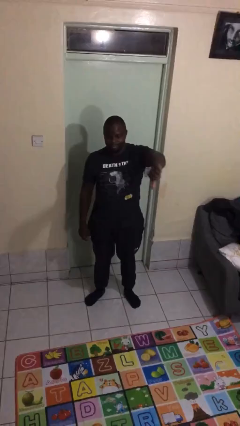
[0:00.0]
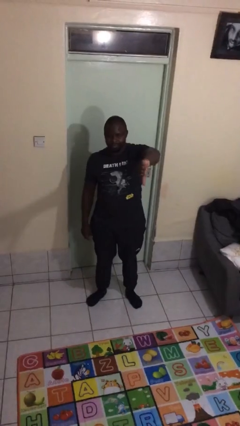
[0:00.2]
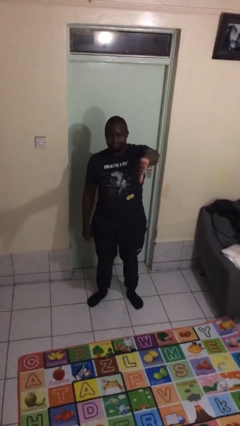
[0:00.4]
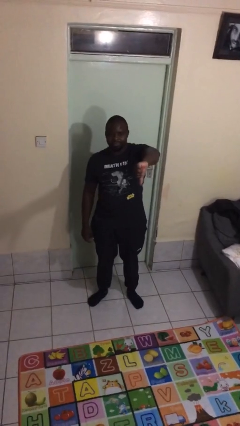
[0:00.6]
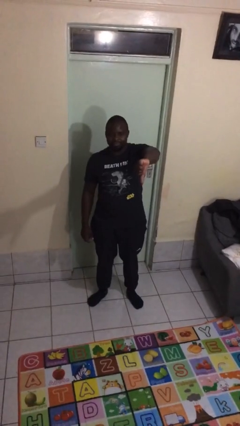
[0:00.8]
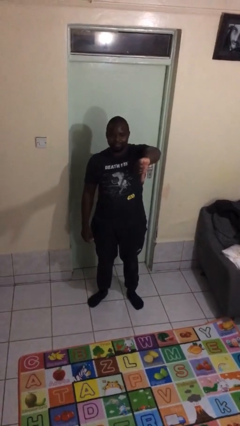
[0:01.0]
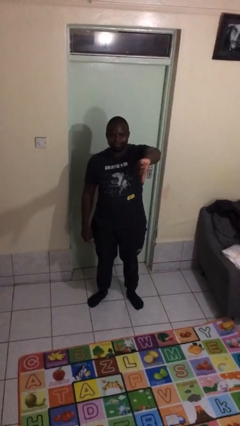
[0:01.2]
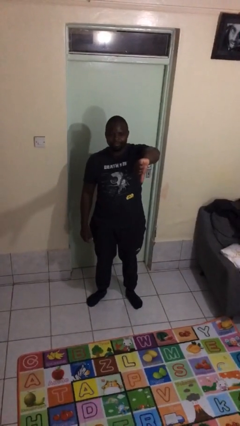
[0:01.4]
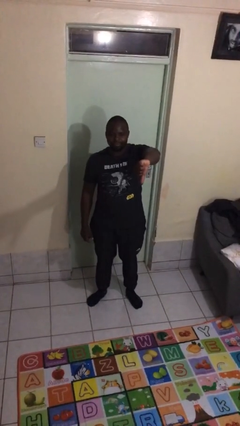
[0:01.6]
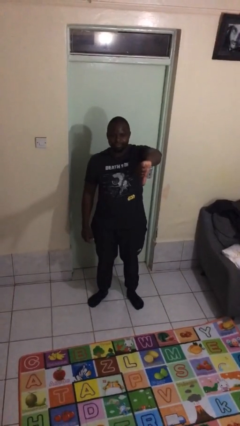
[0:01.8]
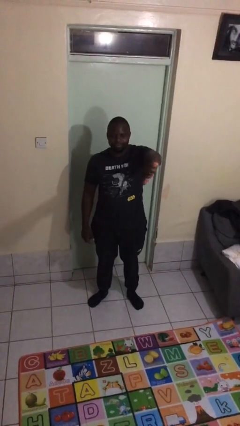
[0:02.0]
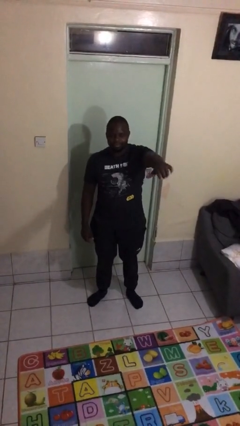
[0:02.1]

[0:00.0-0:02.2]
person gestures thumbs down

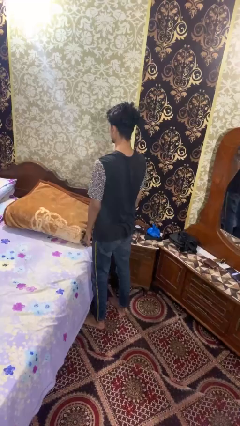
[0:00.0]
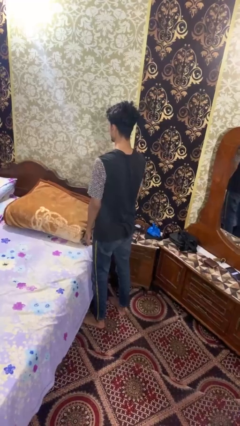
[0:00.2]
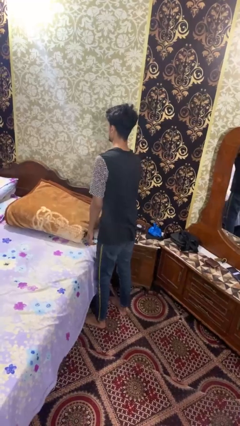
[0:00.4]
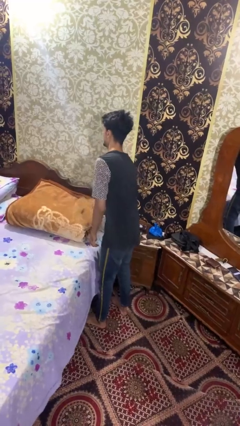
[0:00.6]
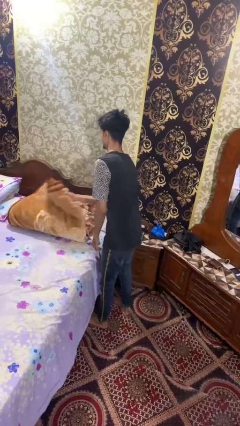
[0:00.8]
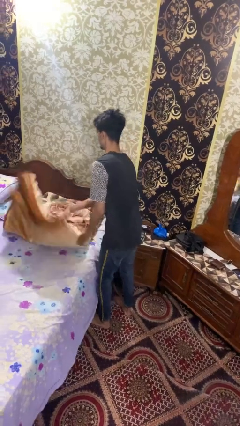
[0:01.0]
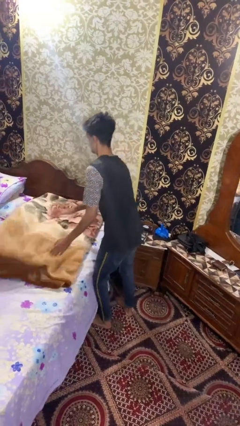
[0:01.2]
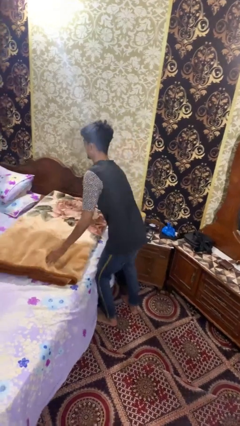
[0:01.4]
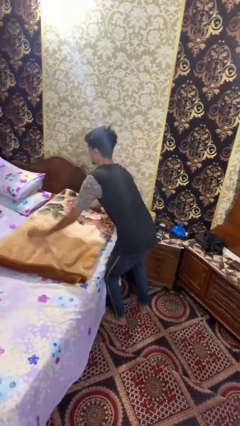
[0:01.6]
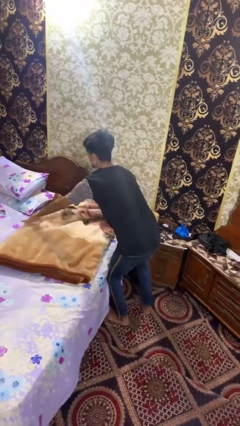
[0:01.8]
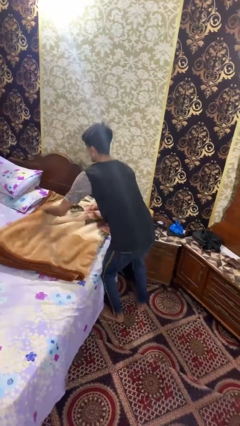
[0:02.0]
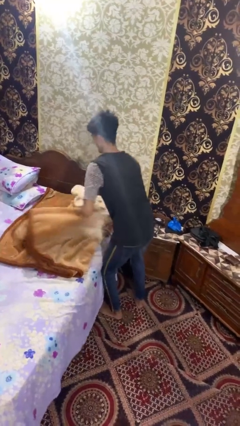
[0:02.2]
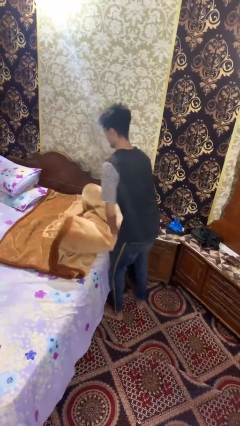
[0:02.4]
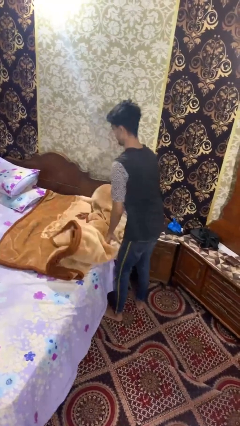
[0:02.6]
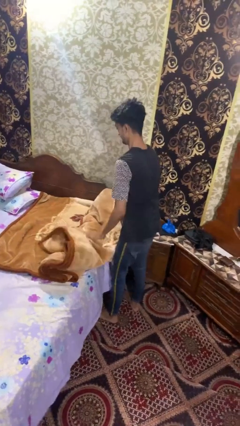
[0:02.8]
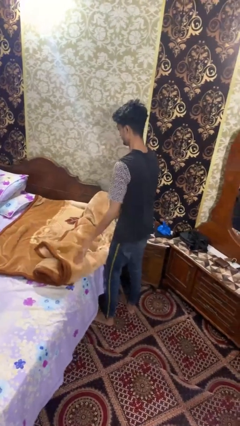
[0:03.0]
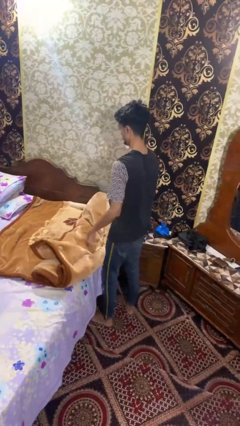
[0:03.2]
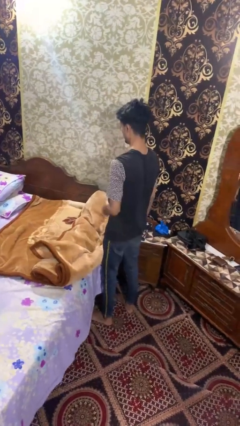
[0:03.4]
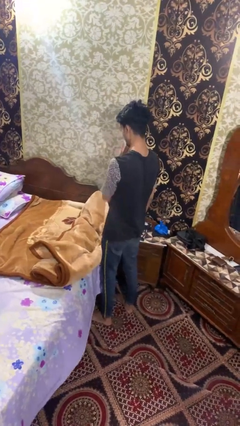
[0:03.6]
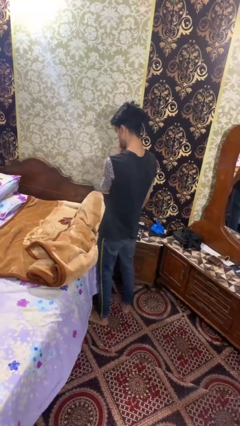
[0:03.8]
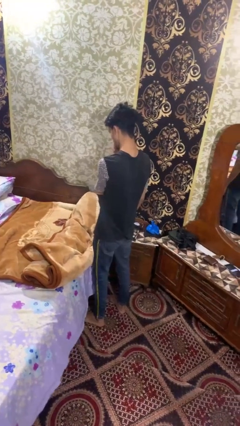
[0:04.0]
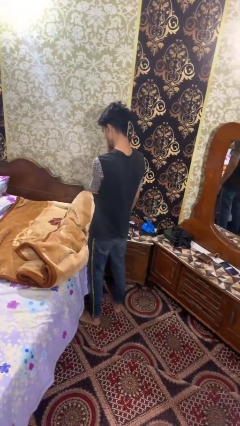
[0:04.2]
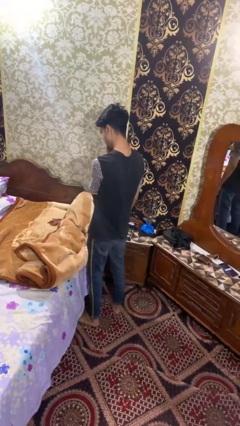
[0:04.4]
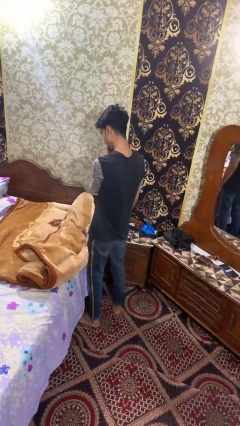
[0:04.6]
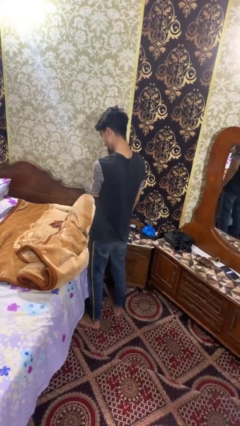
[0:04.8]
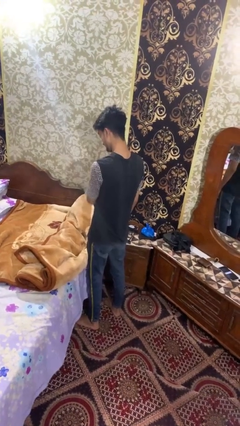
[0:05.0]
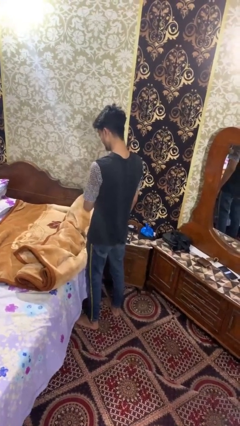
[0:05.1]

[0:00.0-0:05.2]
person unfolds blanket

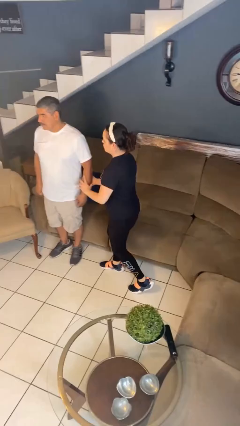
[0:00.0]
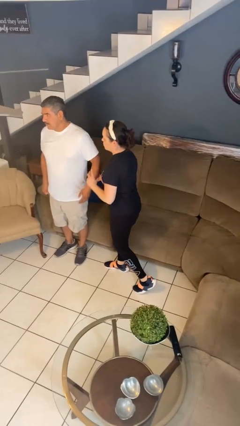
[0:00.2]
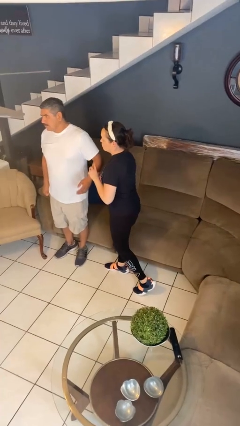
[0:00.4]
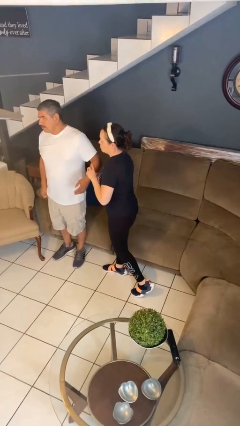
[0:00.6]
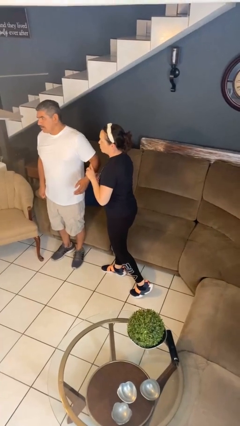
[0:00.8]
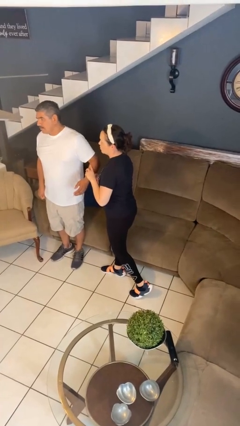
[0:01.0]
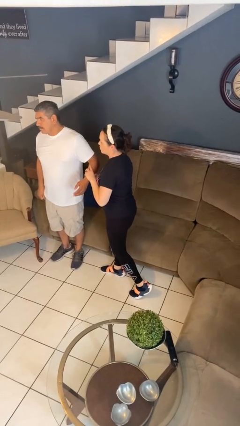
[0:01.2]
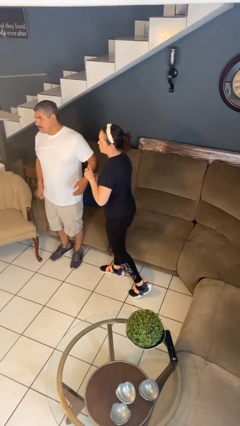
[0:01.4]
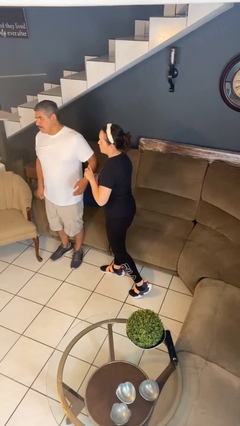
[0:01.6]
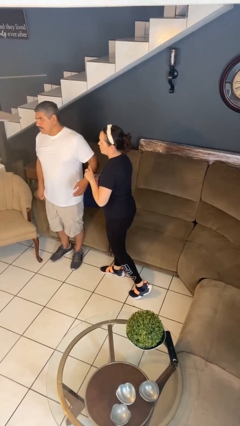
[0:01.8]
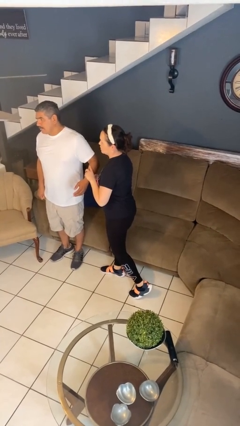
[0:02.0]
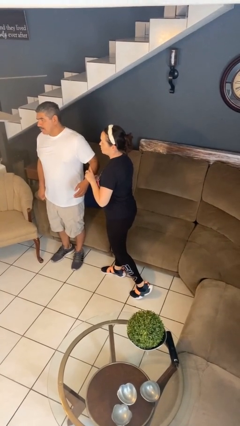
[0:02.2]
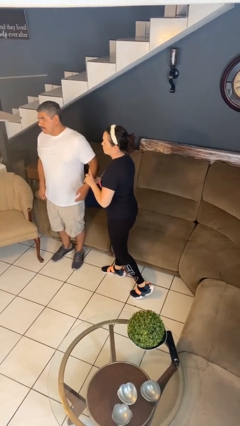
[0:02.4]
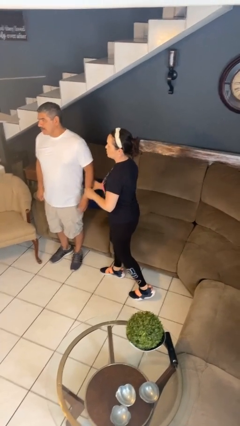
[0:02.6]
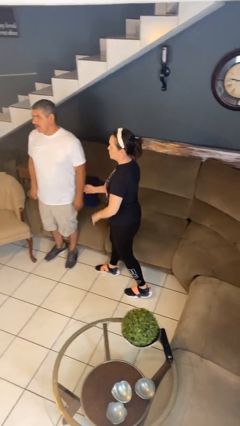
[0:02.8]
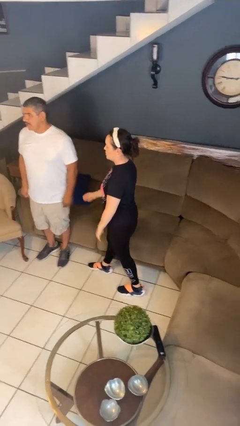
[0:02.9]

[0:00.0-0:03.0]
person grabs person by forearm

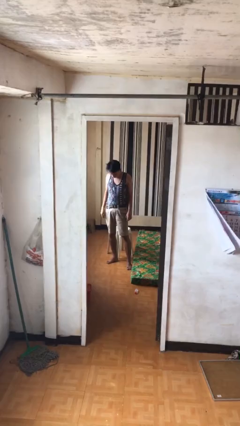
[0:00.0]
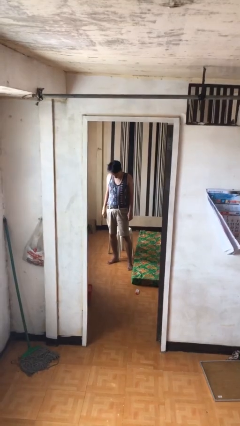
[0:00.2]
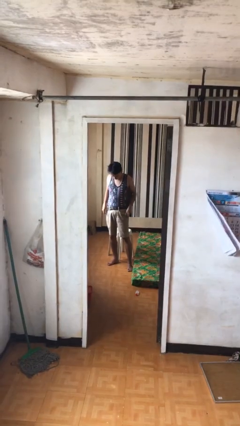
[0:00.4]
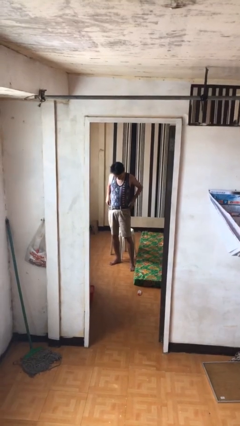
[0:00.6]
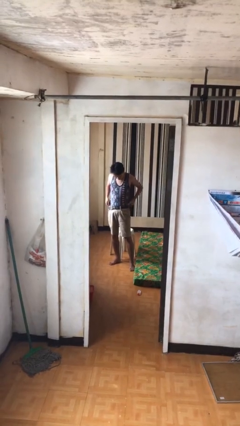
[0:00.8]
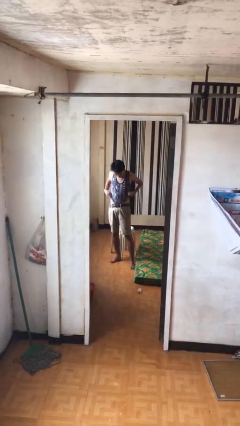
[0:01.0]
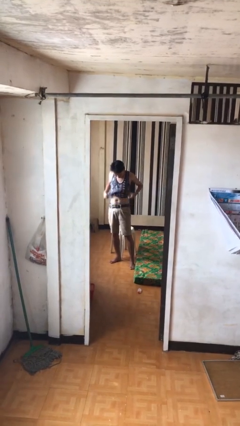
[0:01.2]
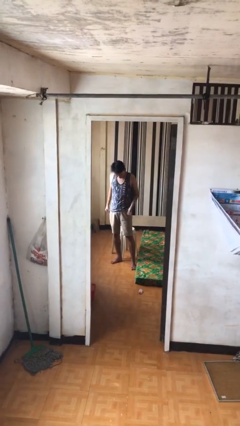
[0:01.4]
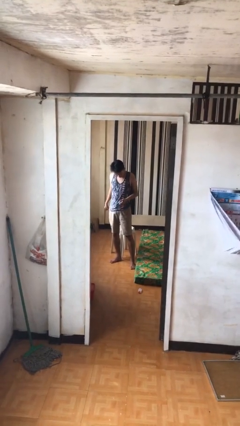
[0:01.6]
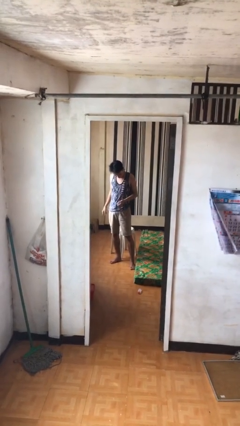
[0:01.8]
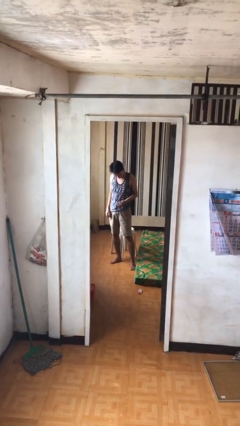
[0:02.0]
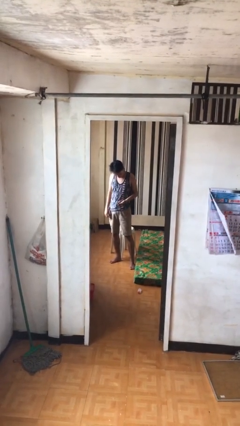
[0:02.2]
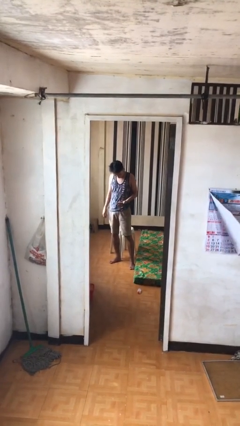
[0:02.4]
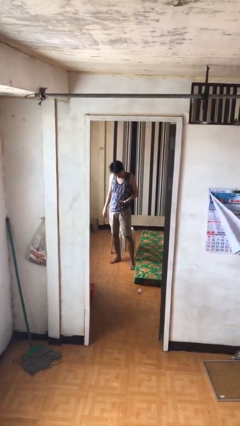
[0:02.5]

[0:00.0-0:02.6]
person untucks shirt

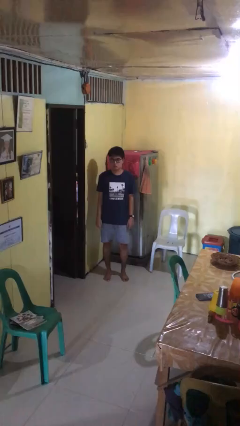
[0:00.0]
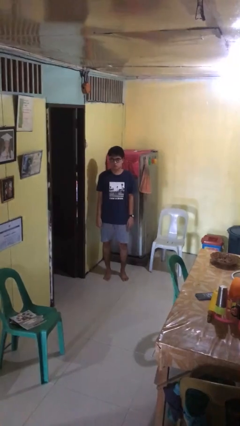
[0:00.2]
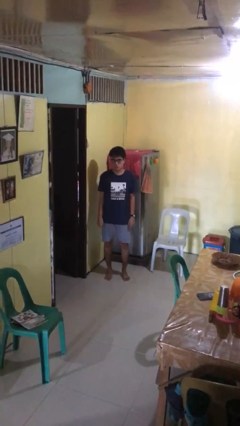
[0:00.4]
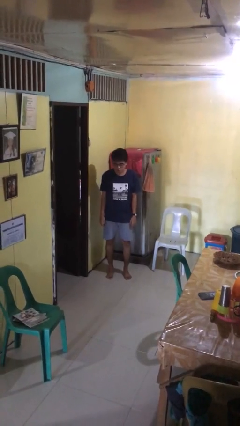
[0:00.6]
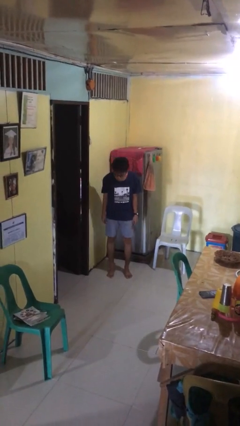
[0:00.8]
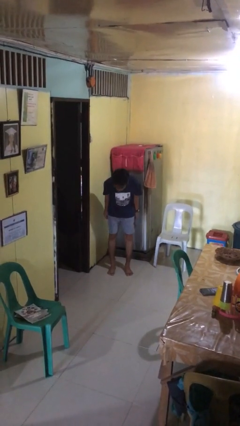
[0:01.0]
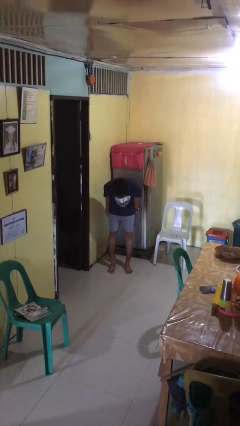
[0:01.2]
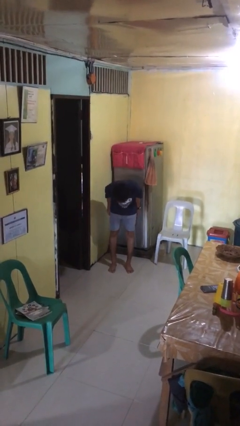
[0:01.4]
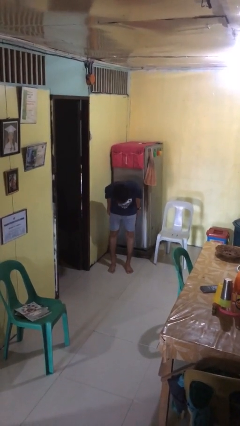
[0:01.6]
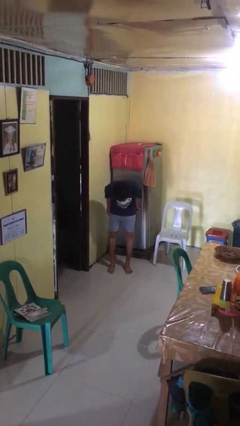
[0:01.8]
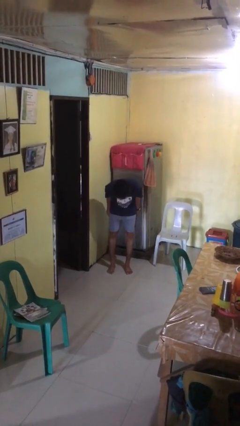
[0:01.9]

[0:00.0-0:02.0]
person bows

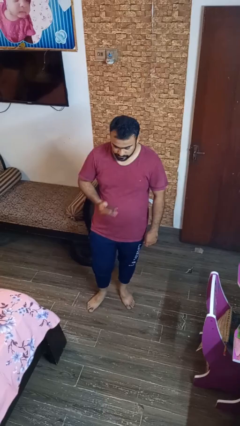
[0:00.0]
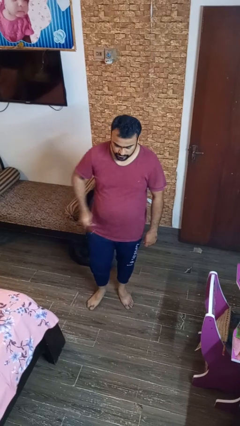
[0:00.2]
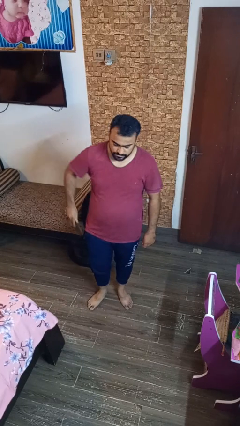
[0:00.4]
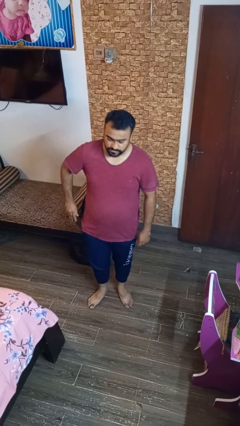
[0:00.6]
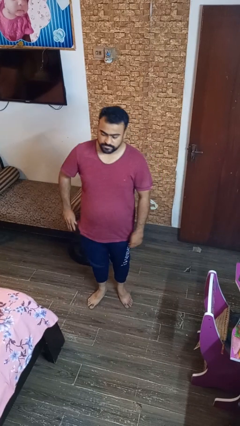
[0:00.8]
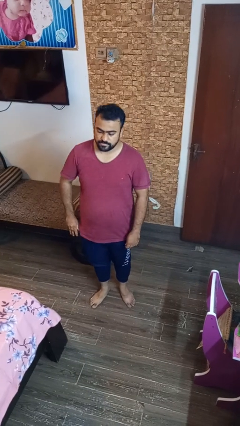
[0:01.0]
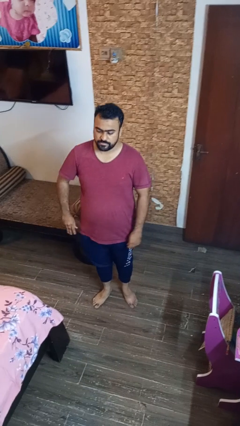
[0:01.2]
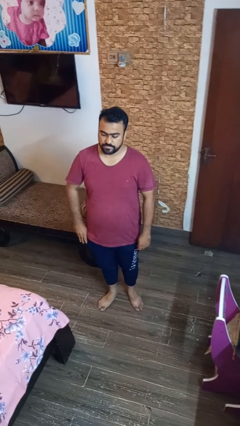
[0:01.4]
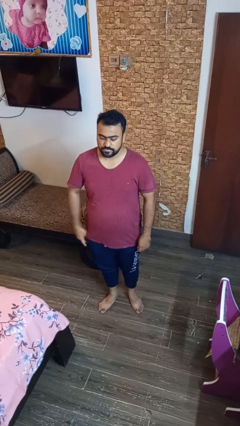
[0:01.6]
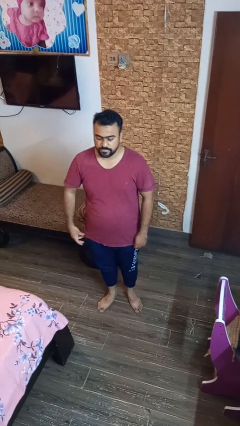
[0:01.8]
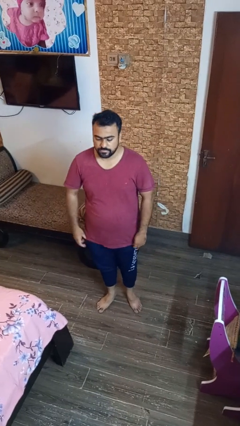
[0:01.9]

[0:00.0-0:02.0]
person puts phone into pocket

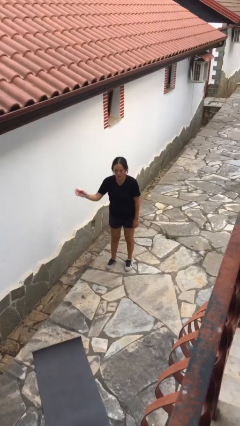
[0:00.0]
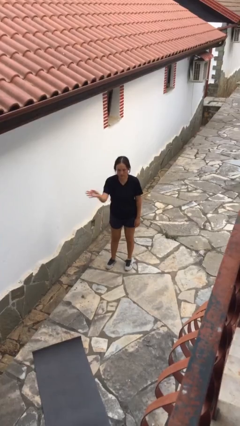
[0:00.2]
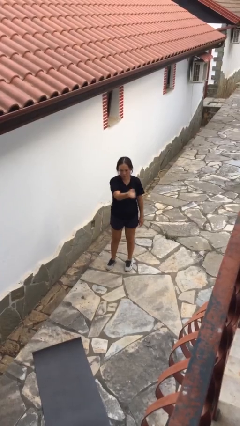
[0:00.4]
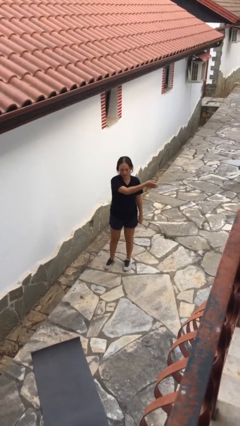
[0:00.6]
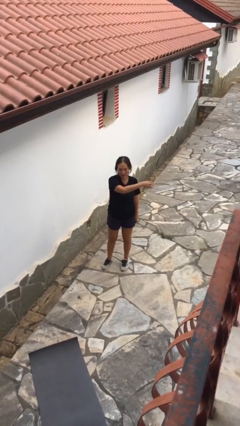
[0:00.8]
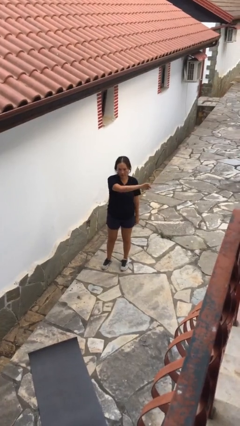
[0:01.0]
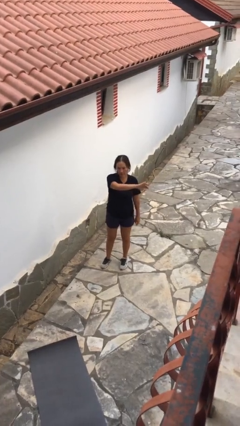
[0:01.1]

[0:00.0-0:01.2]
person gestures swipe left
